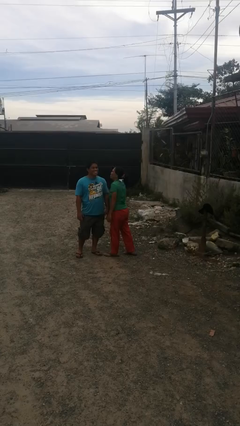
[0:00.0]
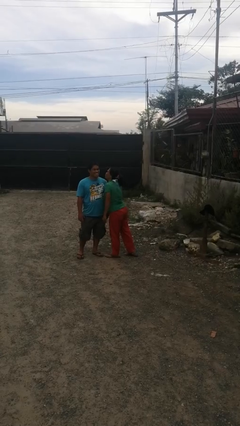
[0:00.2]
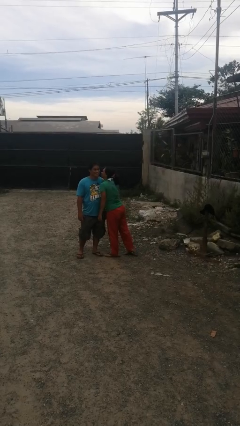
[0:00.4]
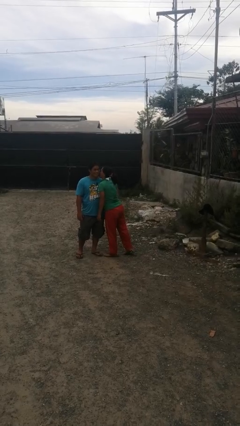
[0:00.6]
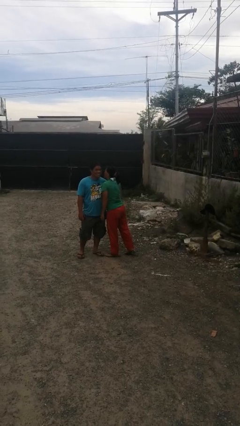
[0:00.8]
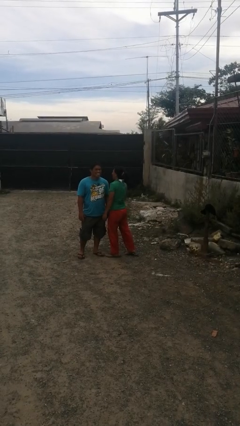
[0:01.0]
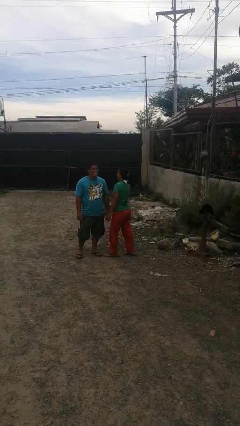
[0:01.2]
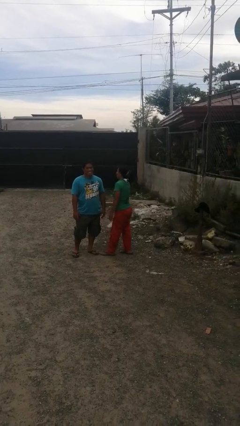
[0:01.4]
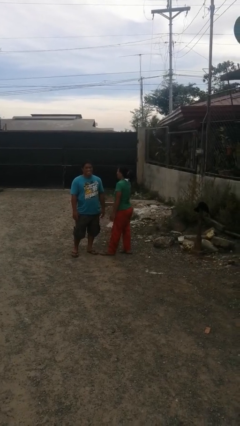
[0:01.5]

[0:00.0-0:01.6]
person kisses cheek of person

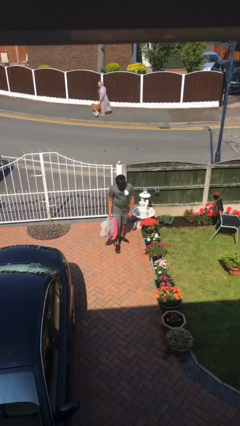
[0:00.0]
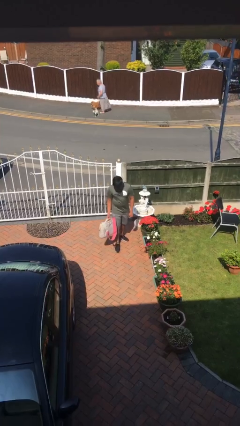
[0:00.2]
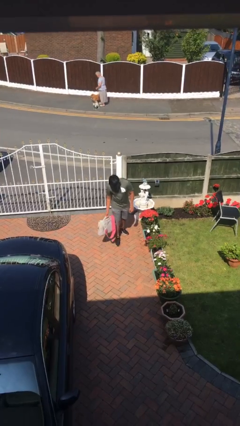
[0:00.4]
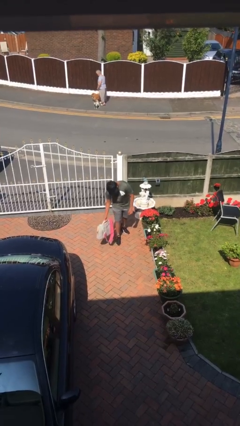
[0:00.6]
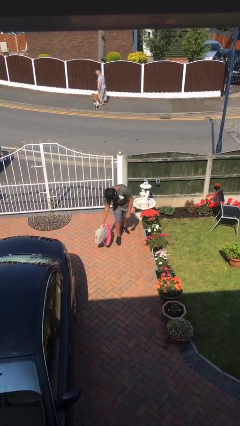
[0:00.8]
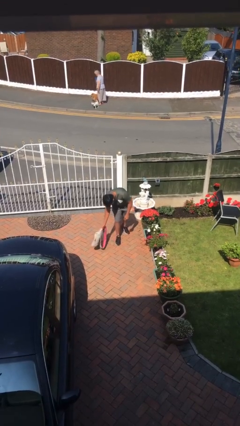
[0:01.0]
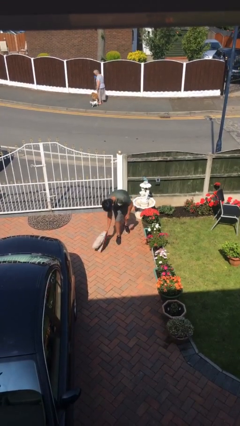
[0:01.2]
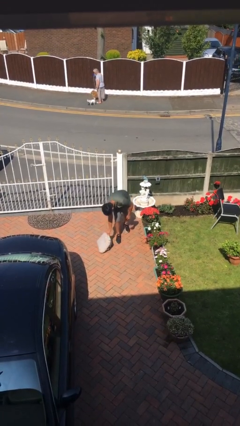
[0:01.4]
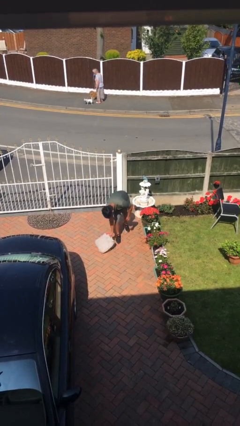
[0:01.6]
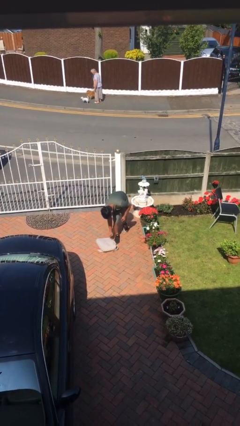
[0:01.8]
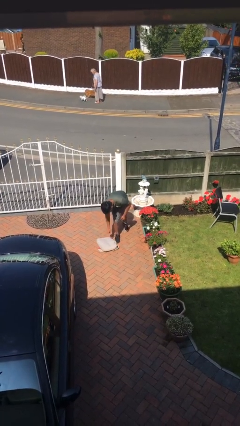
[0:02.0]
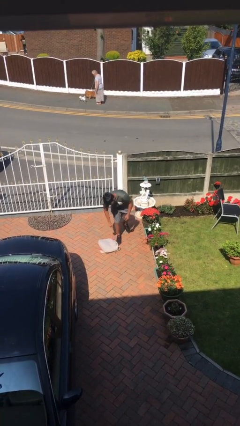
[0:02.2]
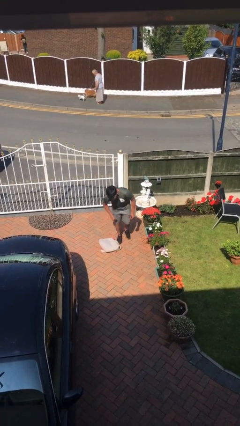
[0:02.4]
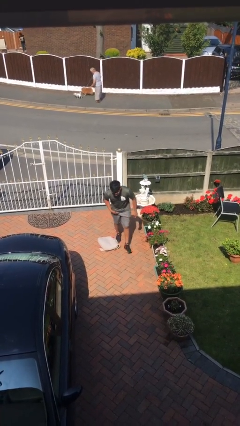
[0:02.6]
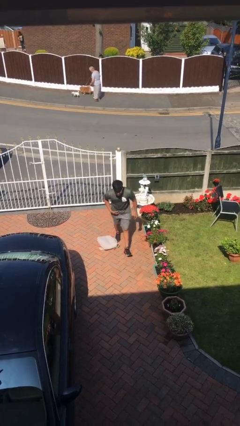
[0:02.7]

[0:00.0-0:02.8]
person puts down object on floor

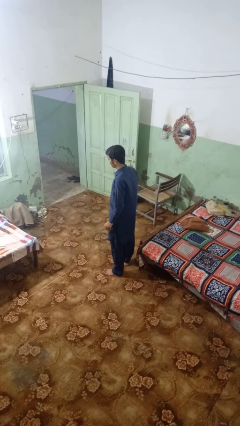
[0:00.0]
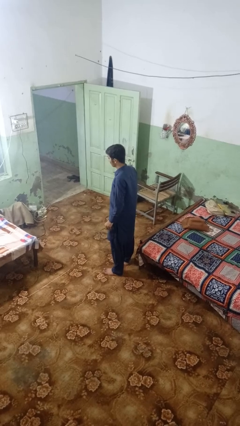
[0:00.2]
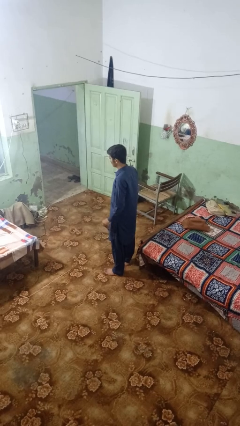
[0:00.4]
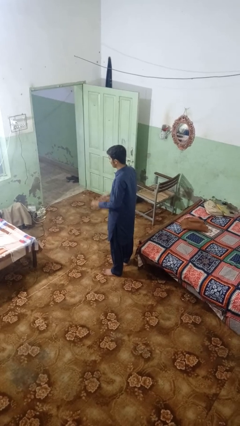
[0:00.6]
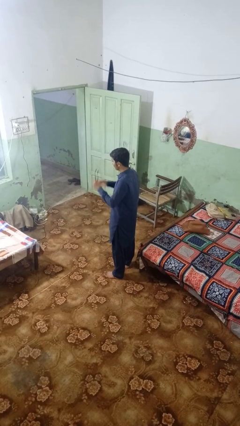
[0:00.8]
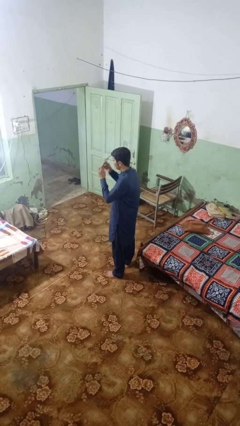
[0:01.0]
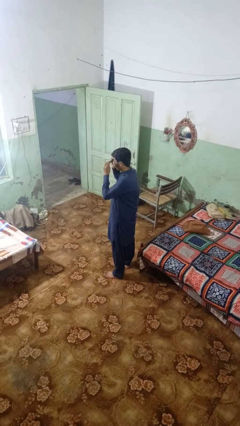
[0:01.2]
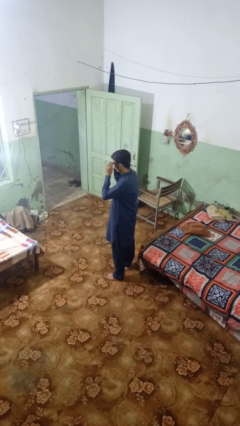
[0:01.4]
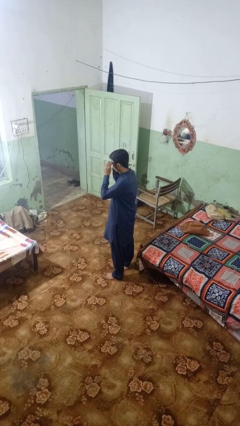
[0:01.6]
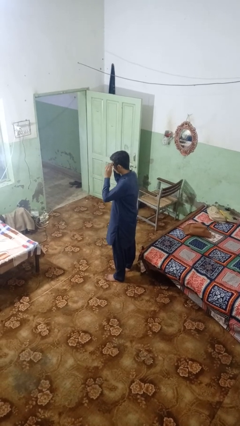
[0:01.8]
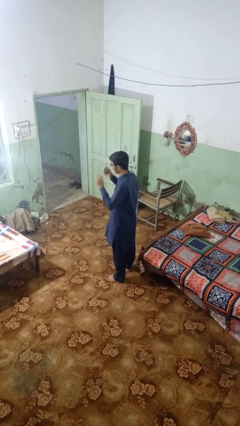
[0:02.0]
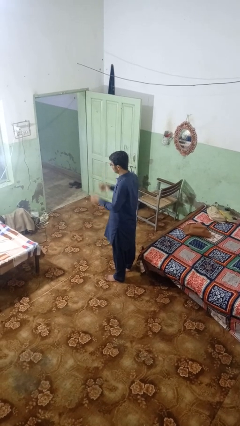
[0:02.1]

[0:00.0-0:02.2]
person puts on glasses

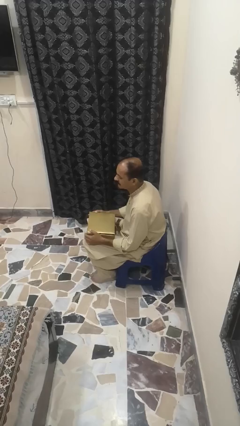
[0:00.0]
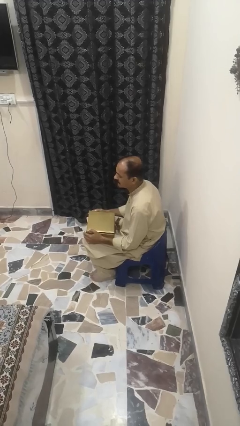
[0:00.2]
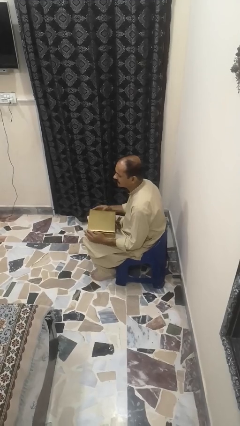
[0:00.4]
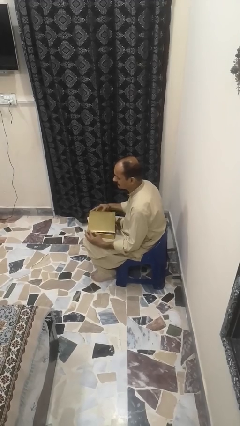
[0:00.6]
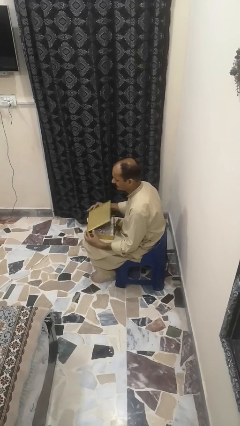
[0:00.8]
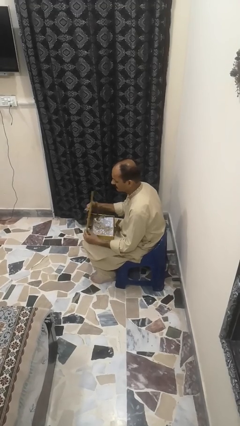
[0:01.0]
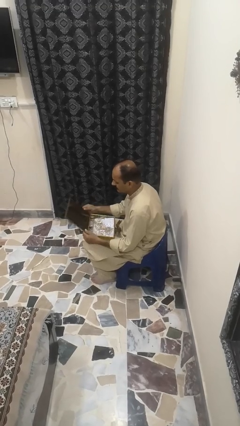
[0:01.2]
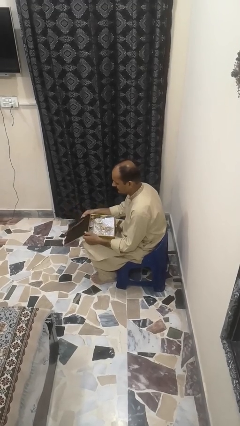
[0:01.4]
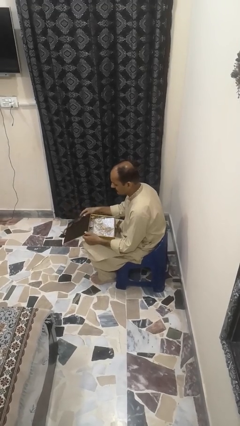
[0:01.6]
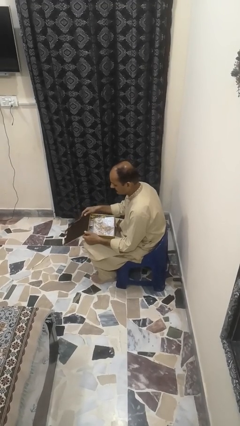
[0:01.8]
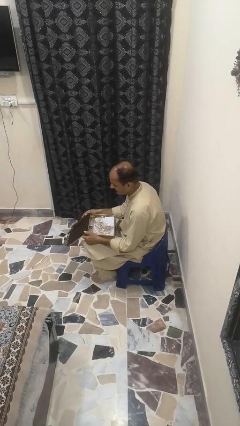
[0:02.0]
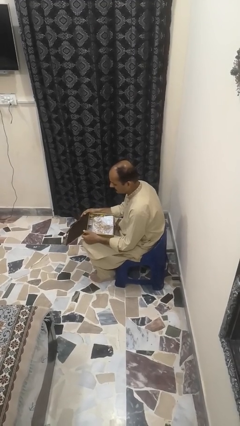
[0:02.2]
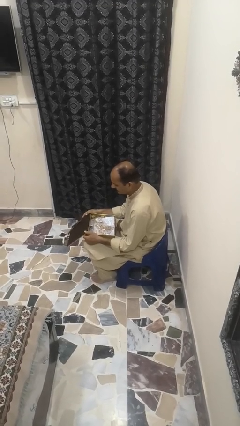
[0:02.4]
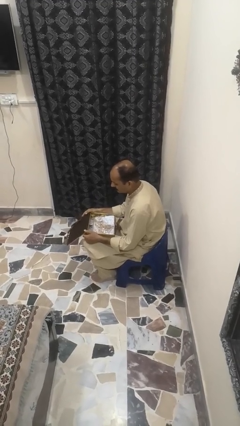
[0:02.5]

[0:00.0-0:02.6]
person opens jewelry box

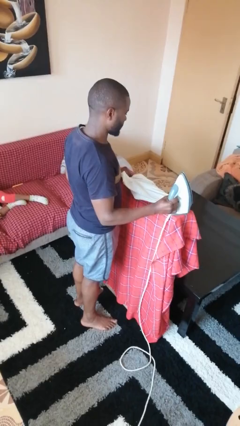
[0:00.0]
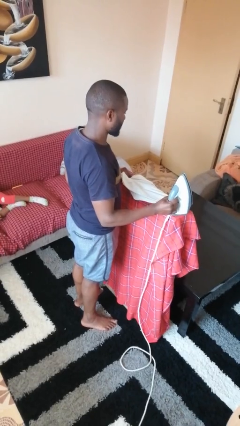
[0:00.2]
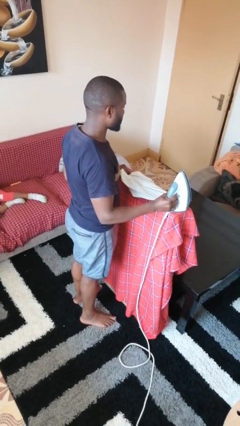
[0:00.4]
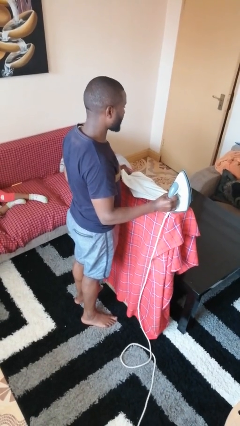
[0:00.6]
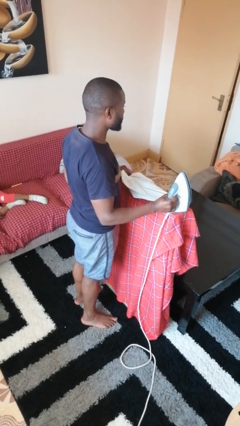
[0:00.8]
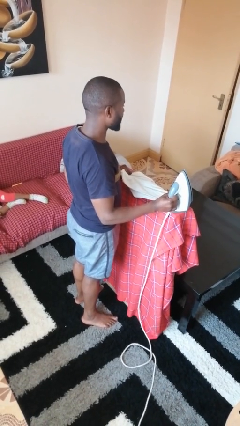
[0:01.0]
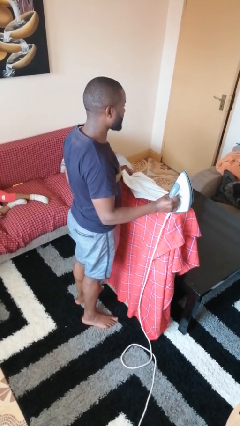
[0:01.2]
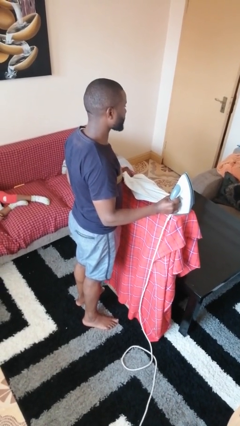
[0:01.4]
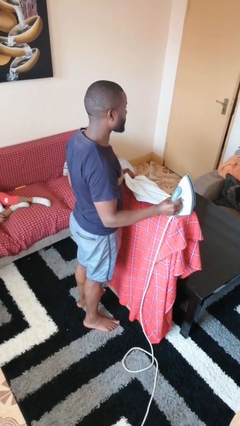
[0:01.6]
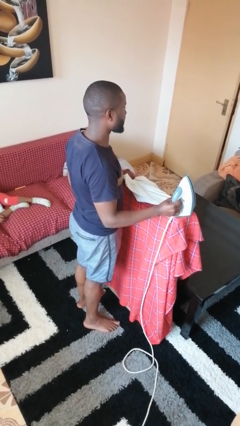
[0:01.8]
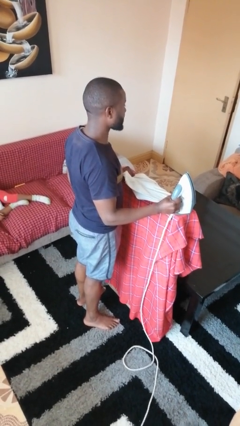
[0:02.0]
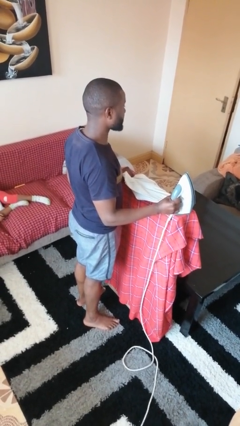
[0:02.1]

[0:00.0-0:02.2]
person irons clothes

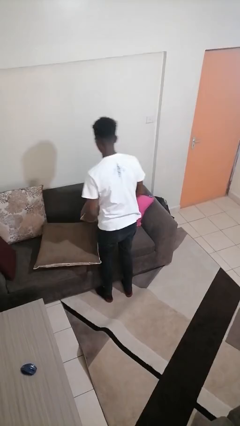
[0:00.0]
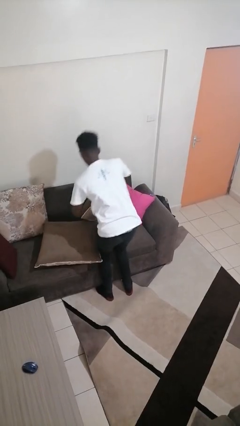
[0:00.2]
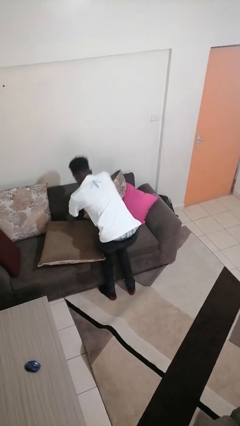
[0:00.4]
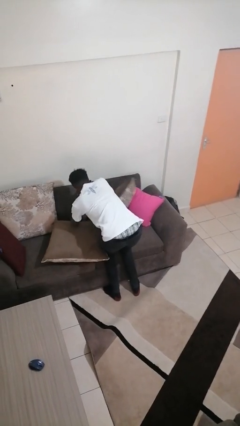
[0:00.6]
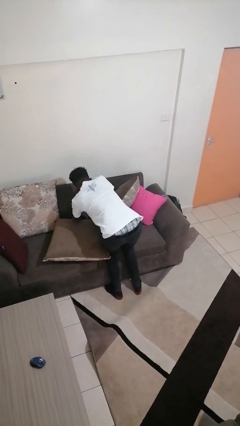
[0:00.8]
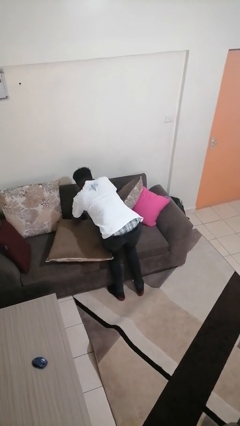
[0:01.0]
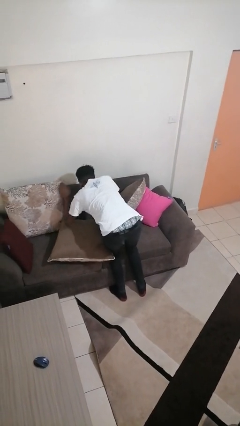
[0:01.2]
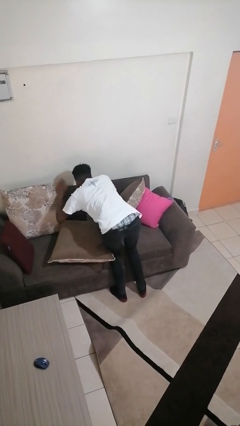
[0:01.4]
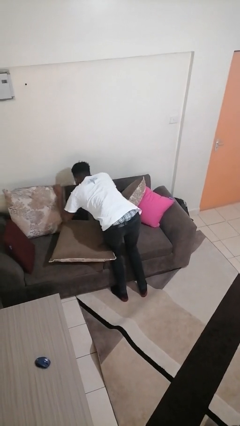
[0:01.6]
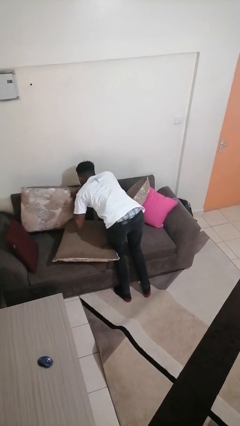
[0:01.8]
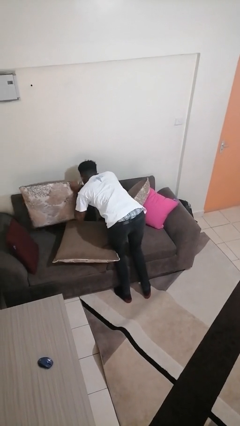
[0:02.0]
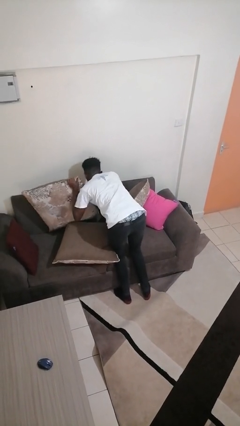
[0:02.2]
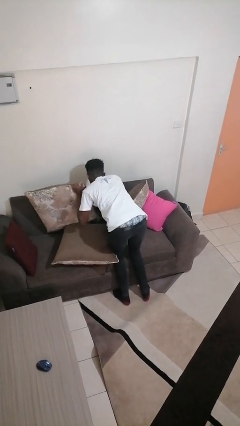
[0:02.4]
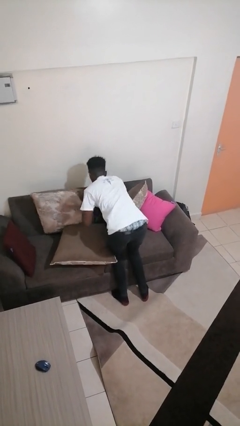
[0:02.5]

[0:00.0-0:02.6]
person searches in couch

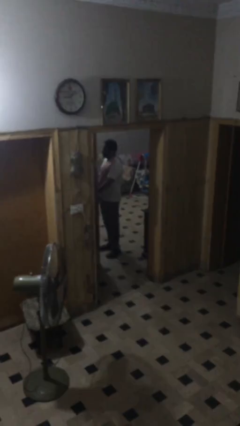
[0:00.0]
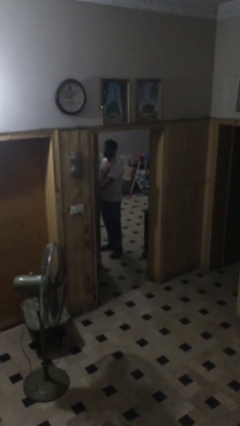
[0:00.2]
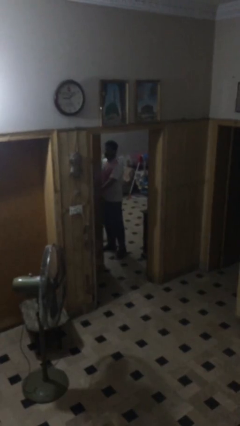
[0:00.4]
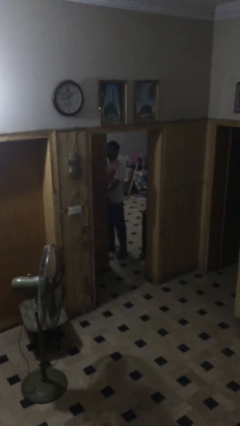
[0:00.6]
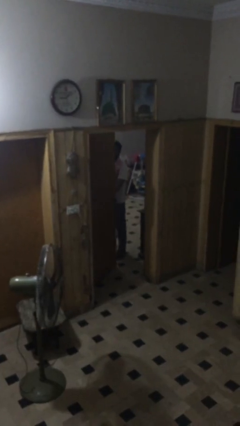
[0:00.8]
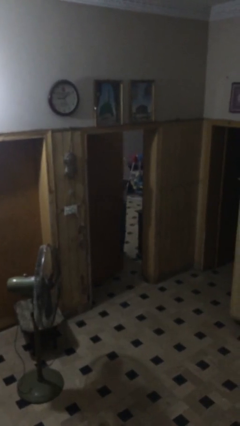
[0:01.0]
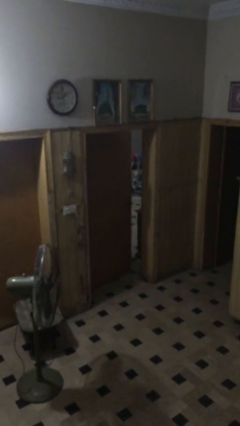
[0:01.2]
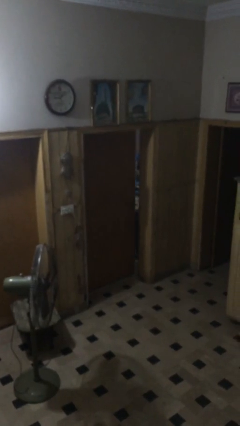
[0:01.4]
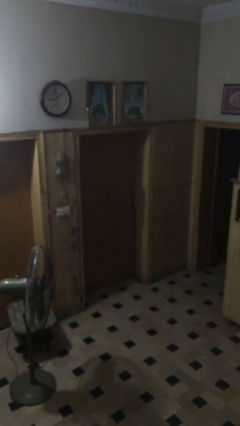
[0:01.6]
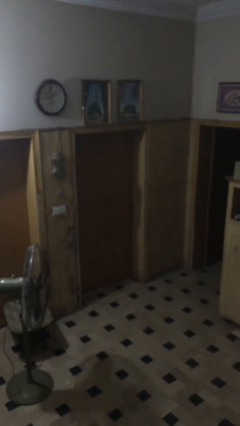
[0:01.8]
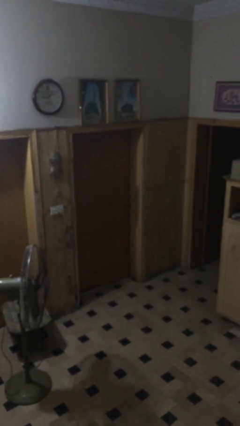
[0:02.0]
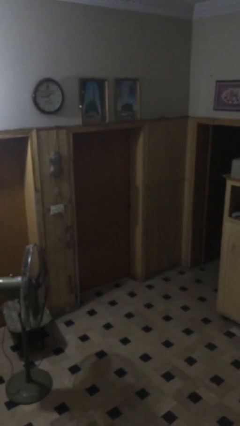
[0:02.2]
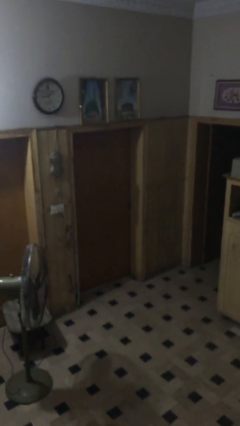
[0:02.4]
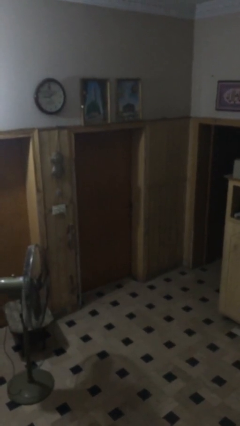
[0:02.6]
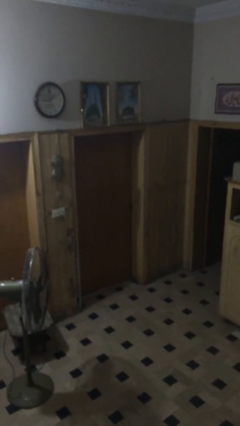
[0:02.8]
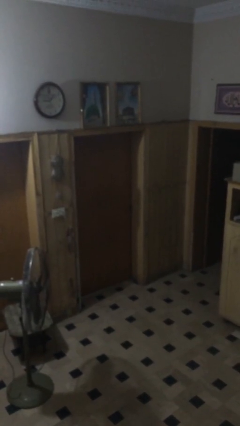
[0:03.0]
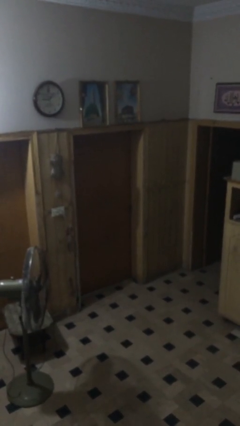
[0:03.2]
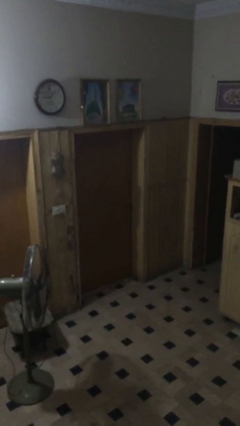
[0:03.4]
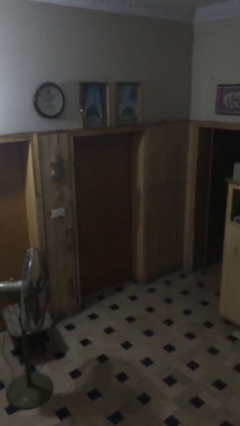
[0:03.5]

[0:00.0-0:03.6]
person closes facility door
